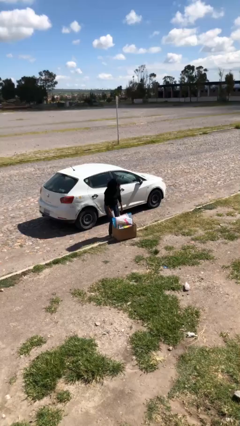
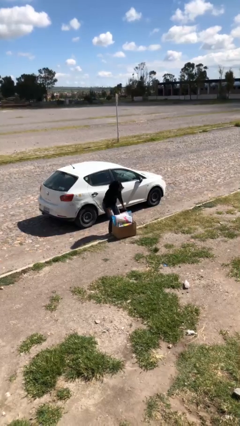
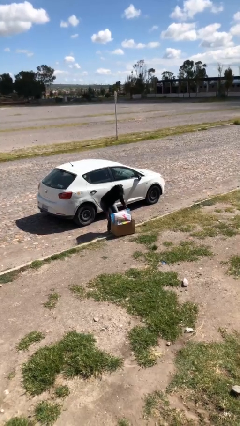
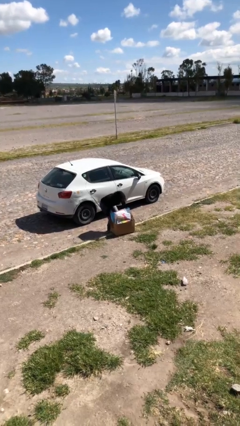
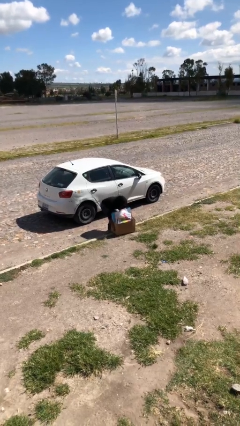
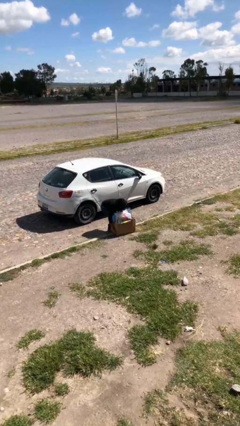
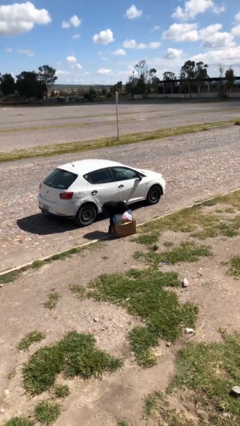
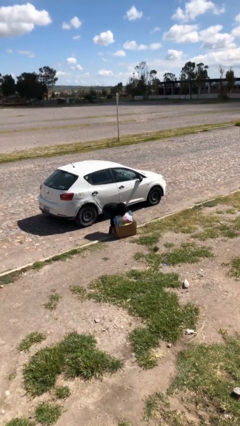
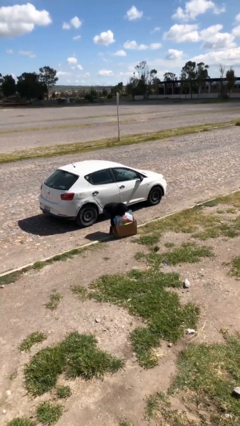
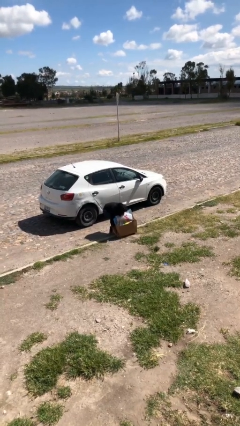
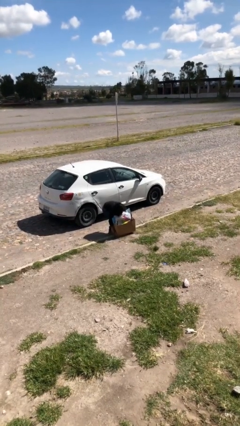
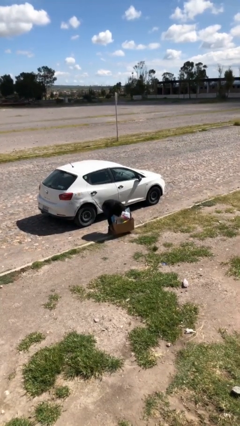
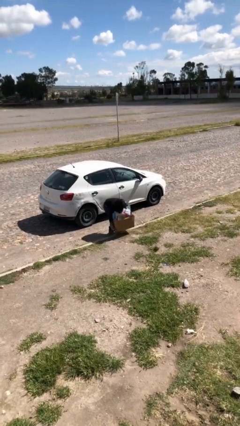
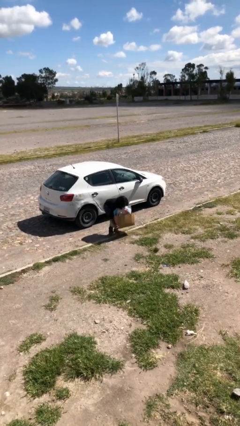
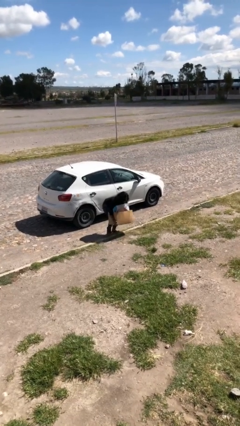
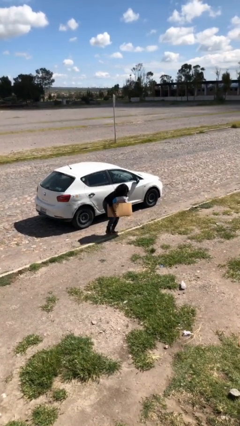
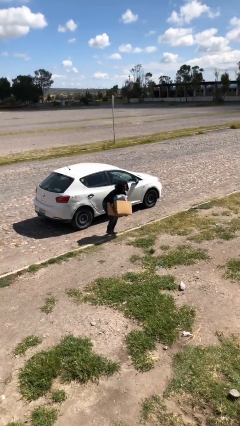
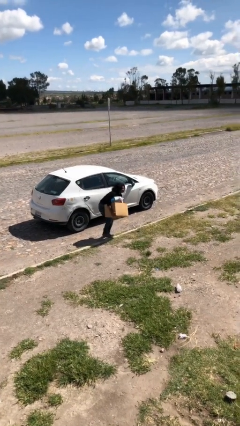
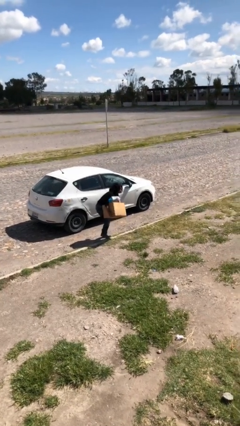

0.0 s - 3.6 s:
person picks up object from floor

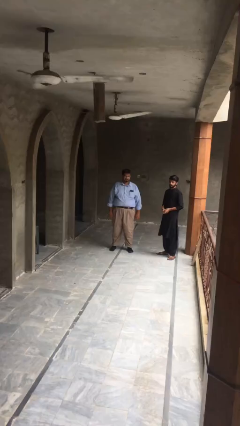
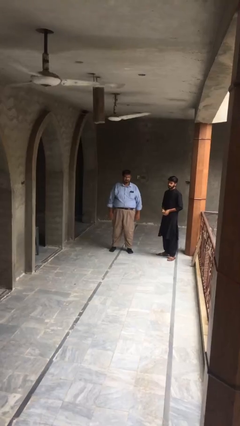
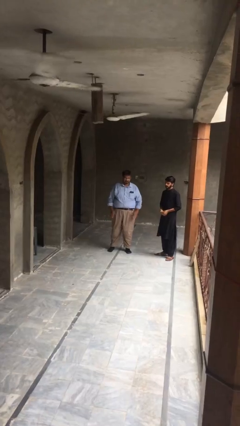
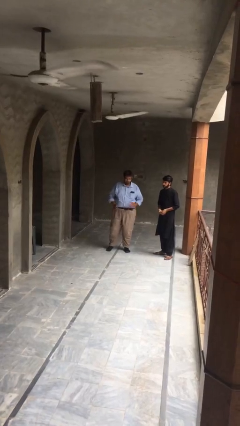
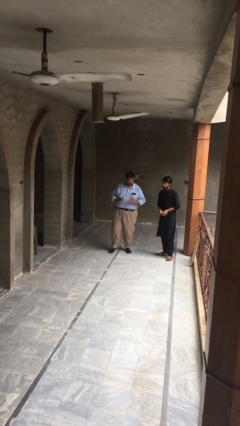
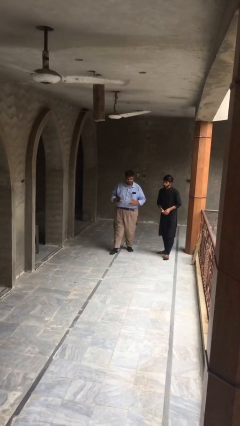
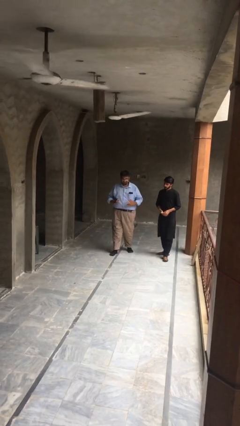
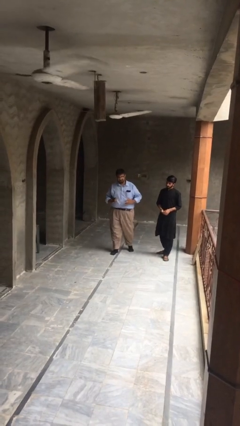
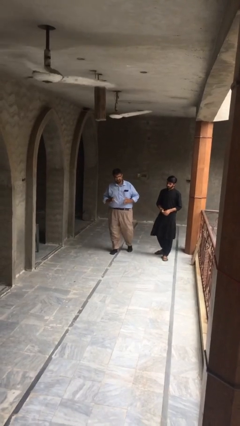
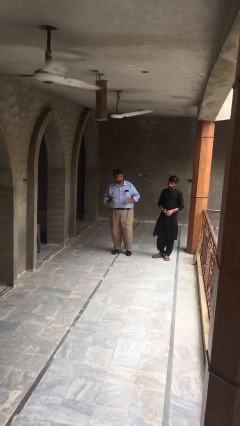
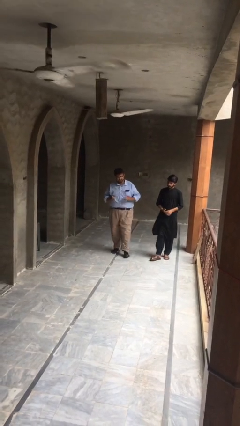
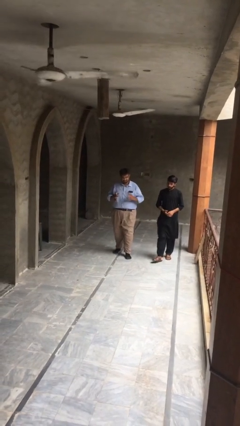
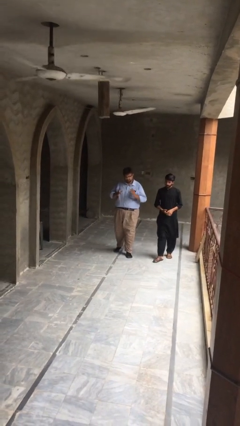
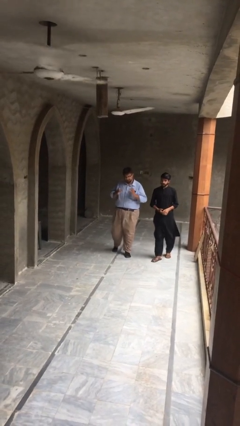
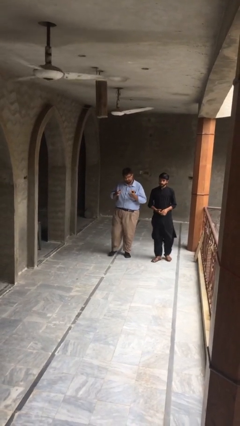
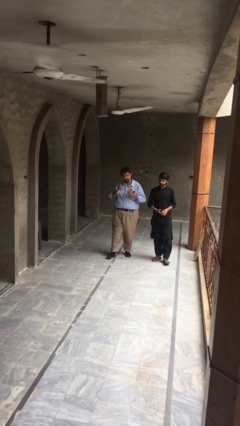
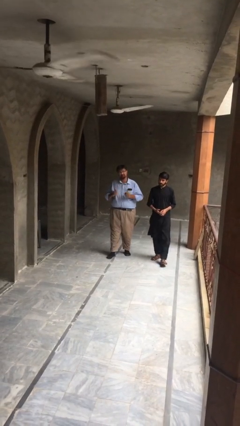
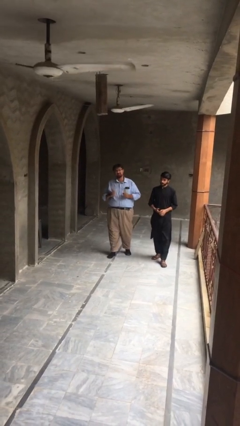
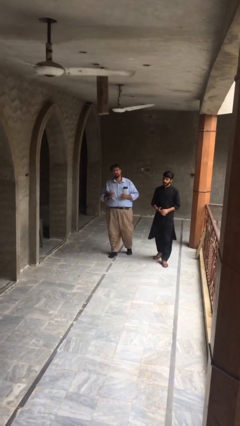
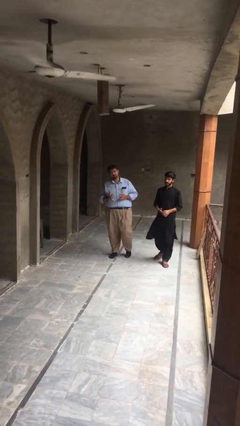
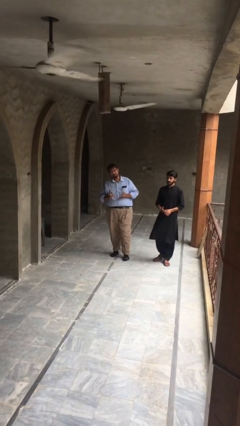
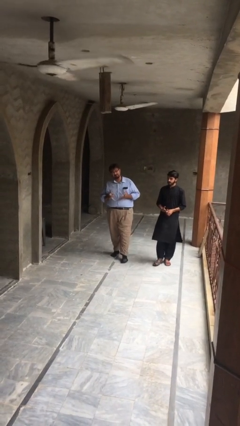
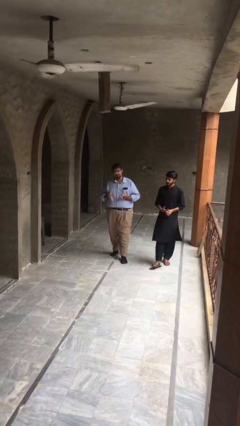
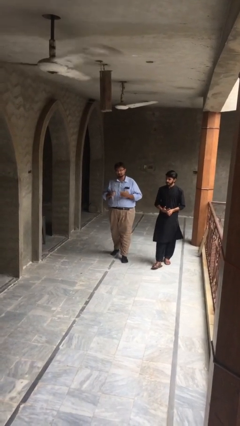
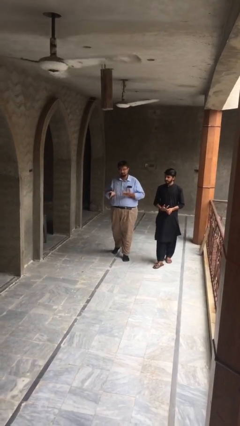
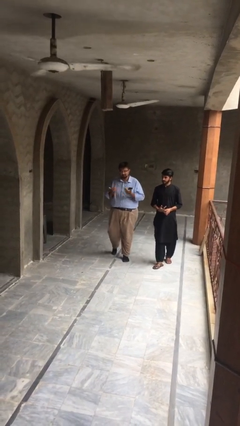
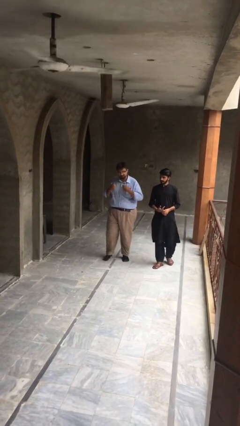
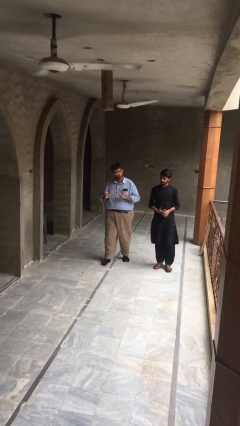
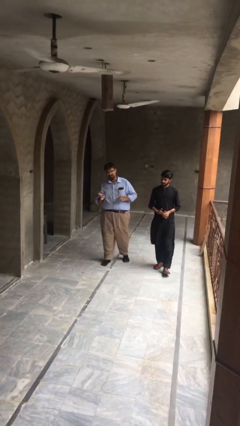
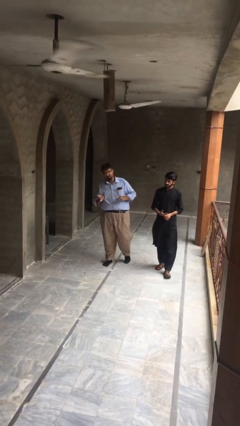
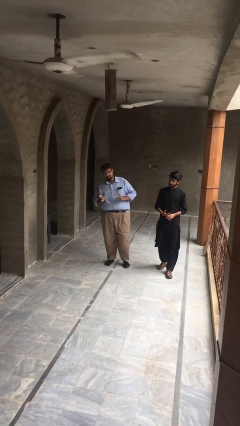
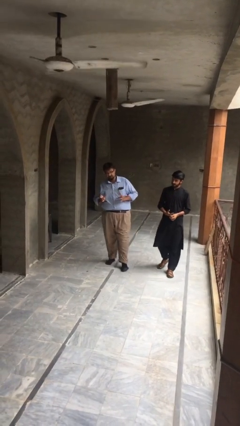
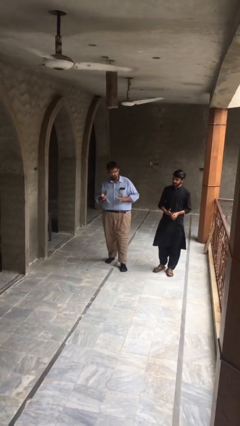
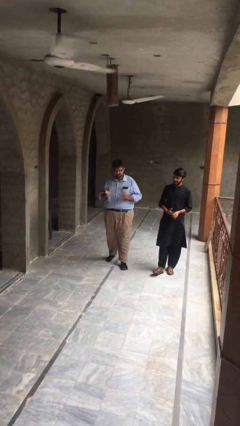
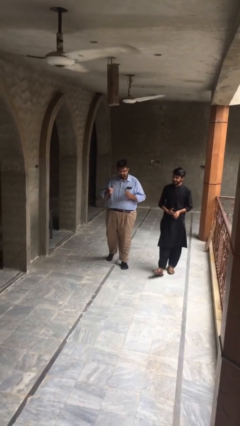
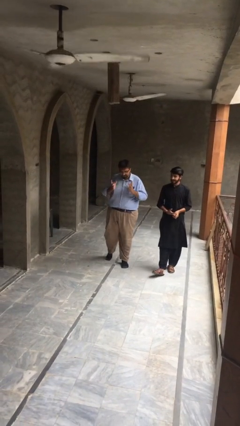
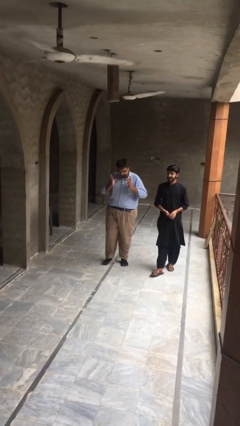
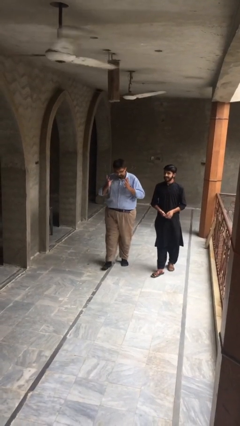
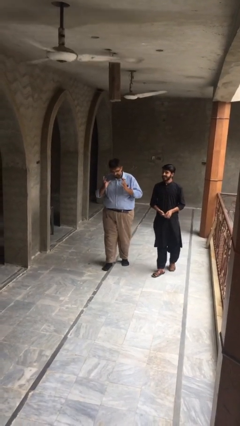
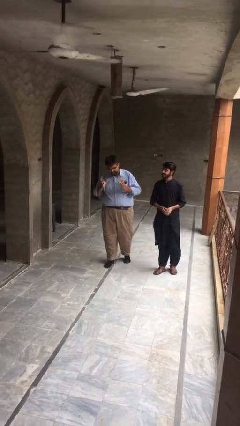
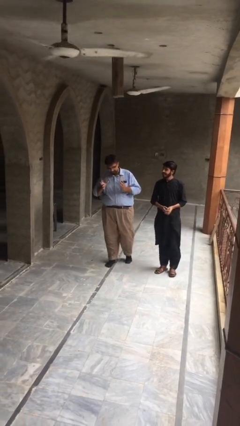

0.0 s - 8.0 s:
person talks to person

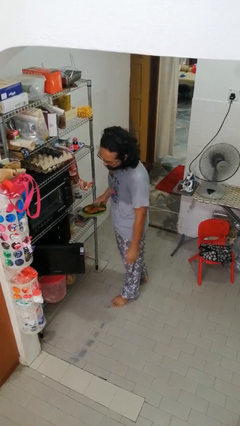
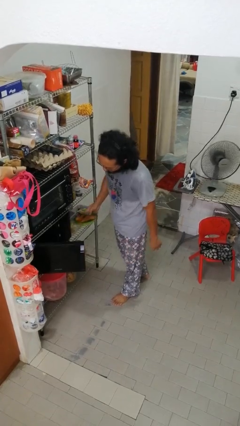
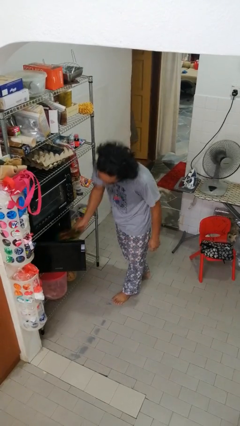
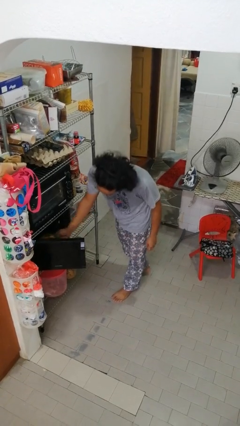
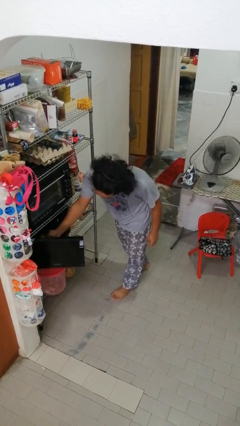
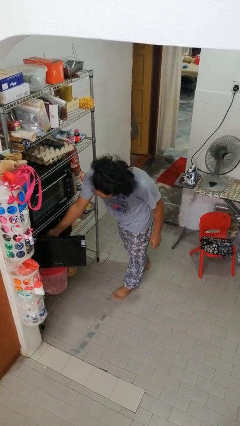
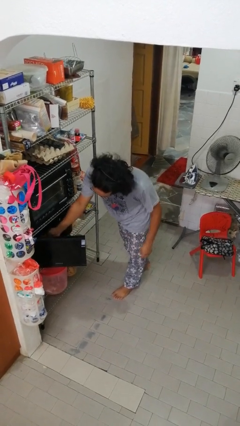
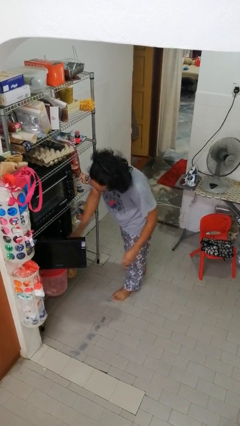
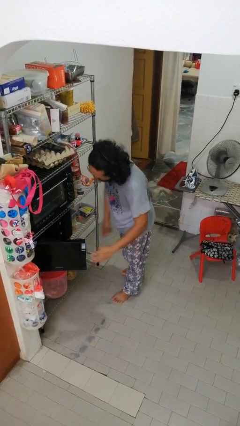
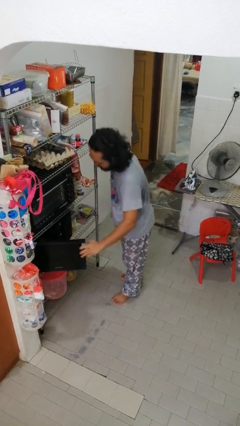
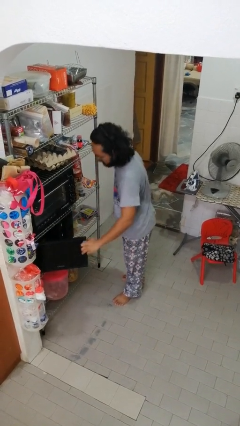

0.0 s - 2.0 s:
person puts object into microwave

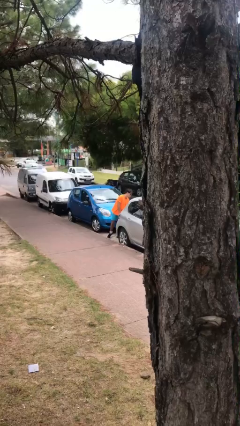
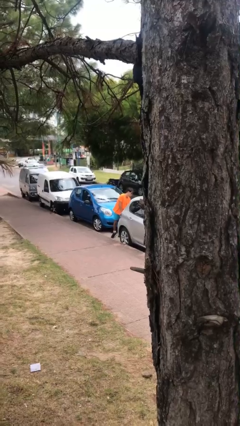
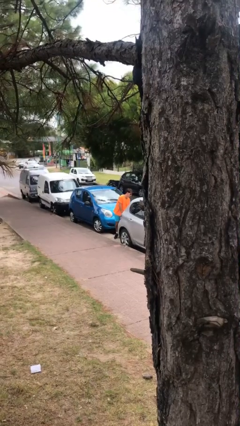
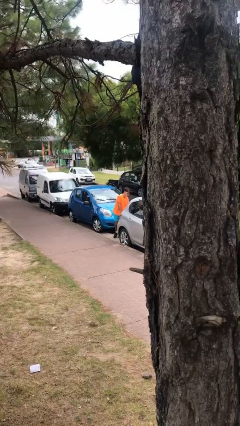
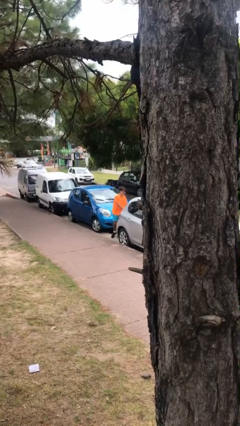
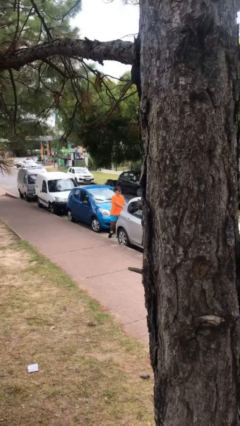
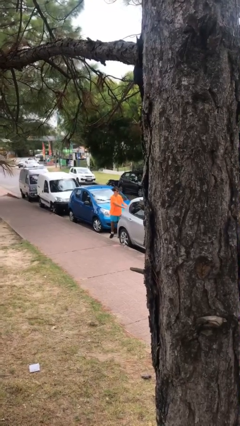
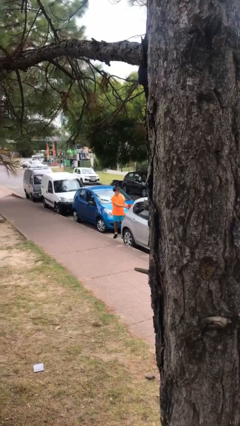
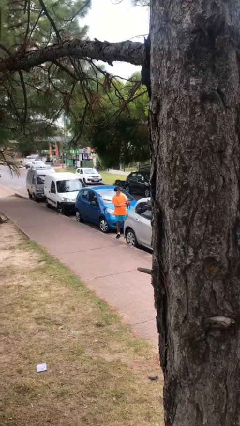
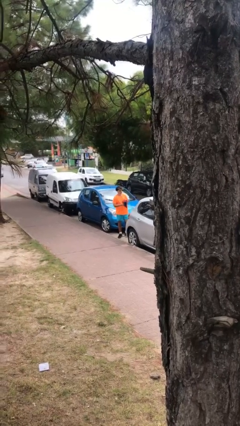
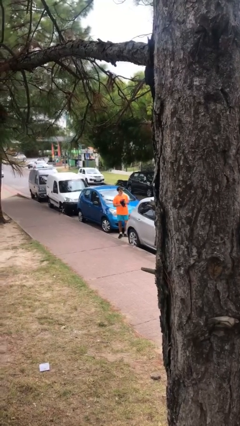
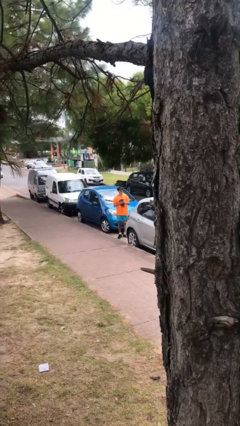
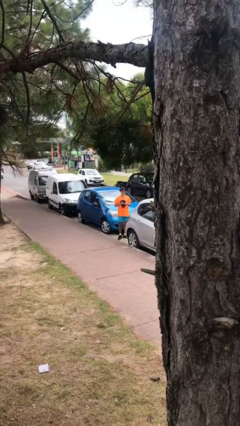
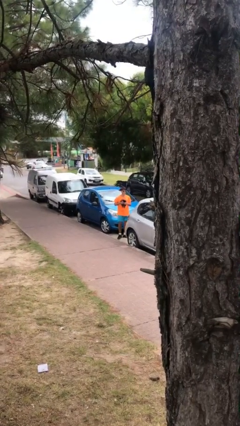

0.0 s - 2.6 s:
person unloads car

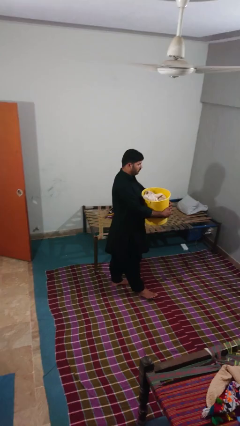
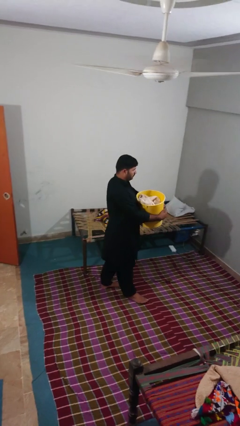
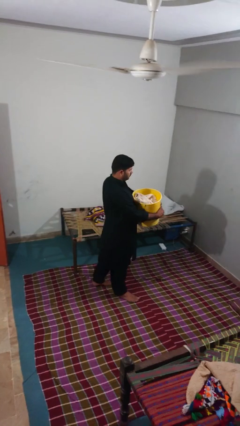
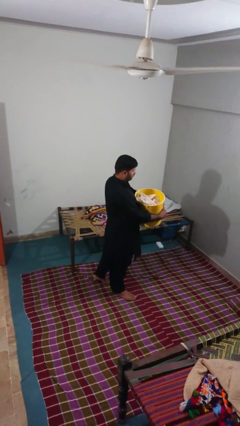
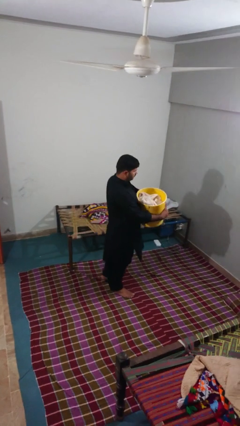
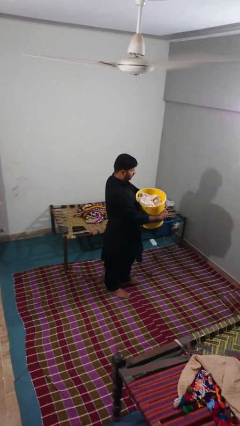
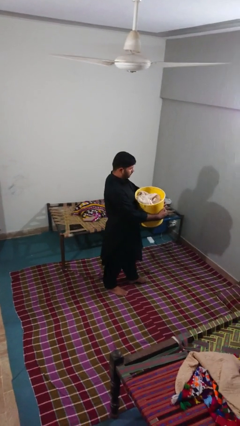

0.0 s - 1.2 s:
person carries laundry basket
